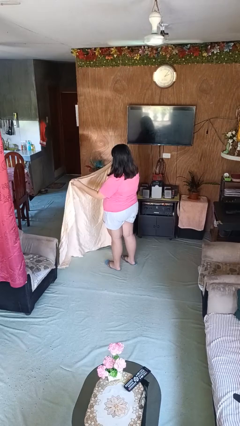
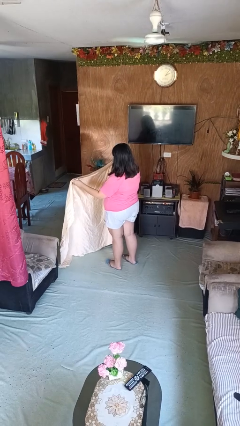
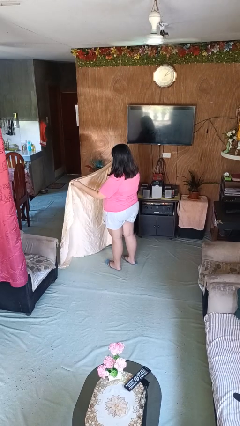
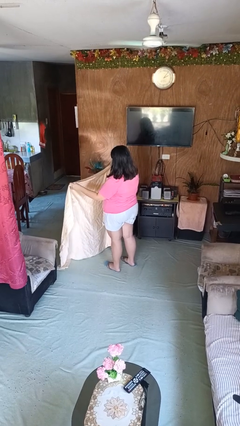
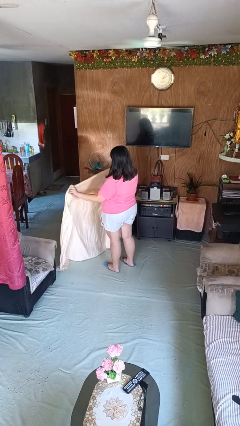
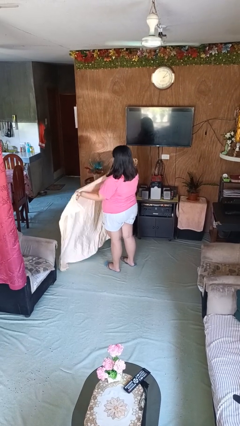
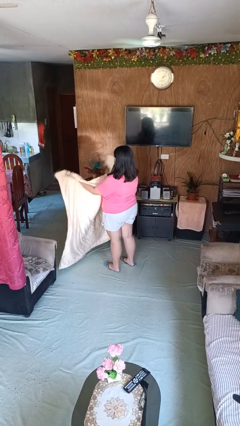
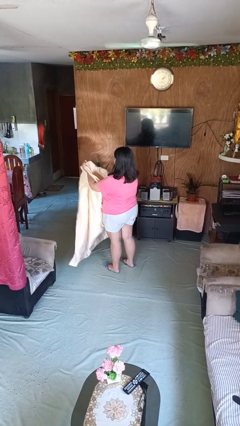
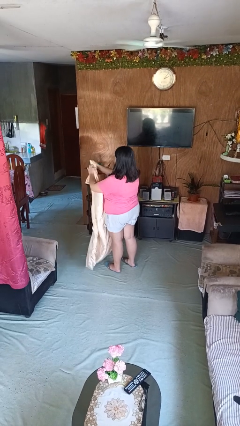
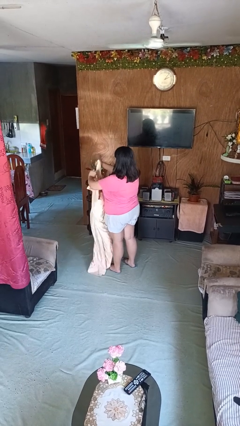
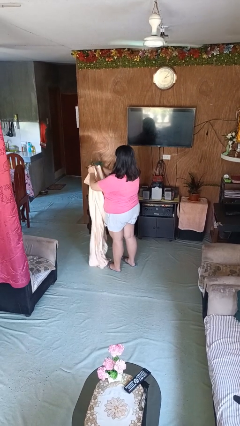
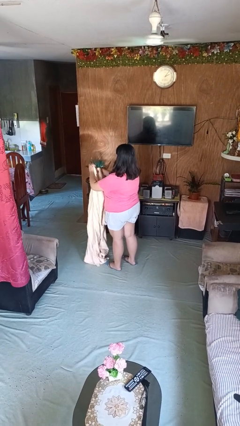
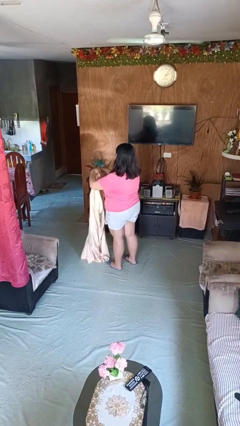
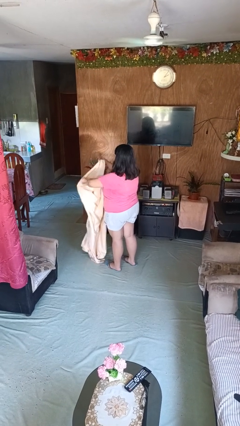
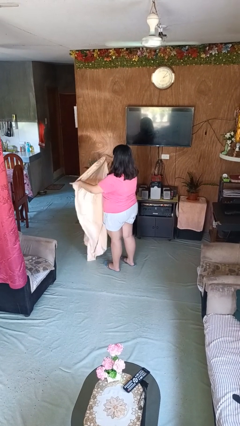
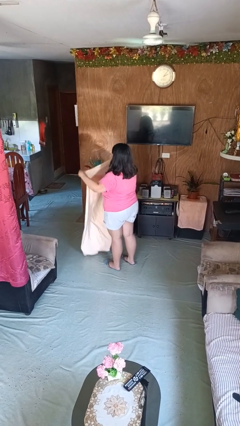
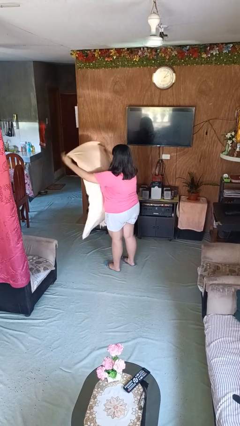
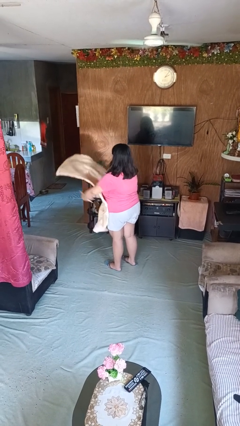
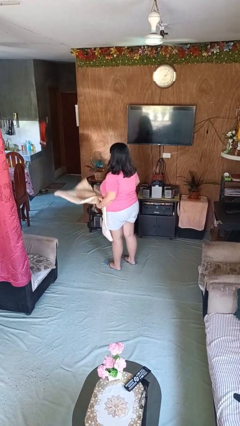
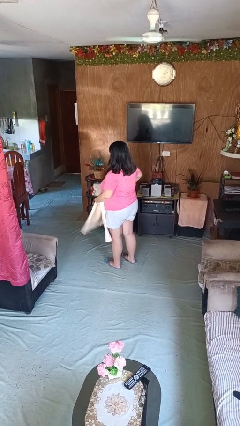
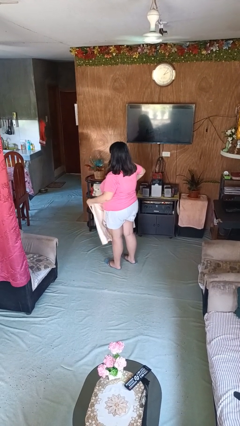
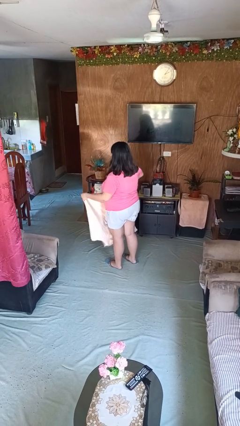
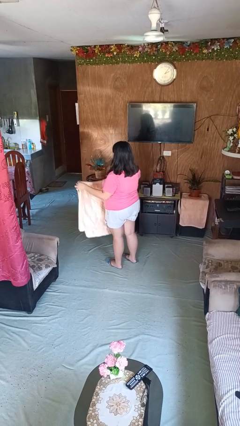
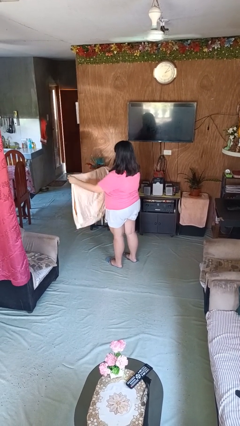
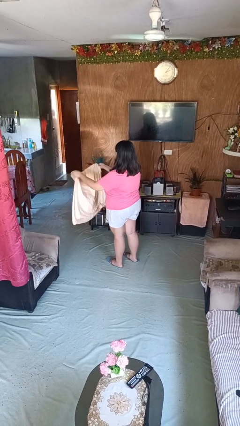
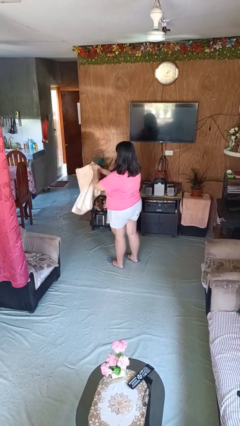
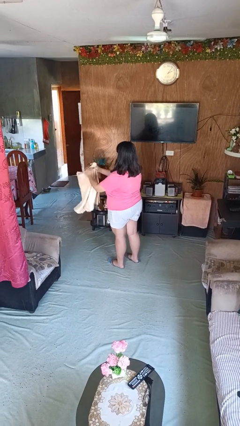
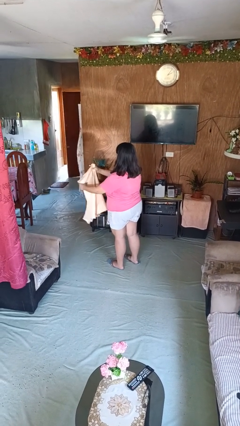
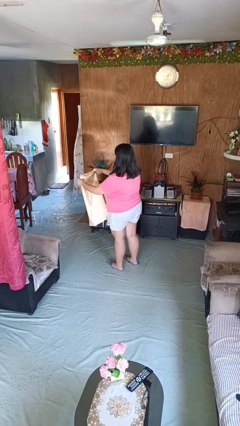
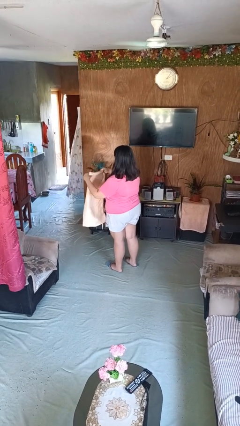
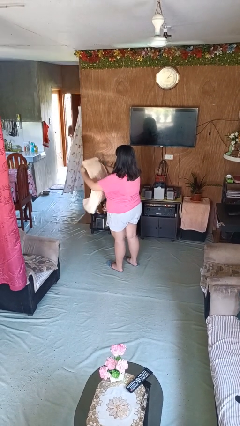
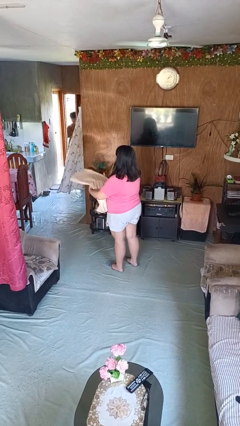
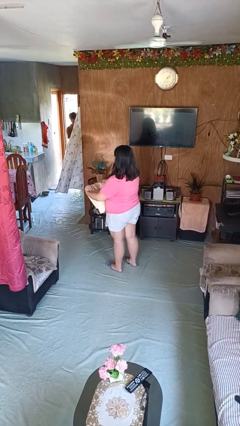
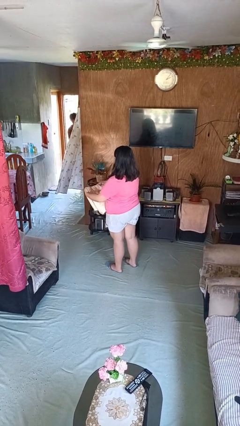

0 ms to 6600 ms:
person folds blanket

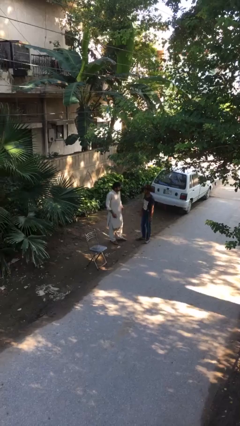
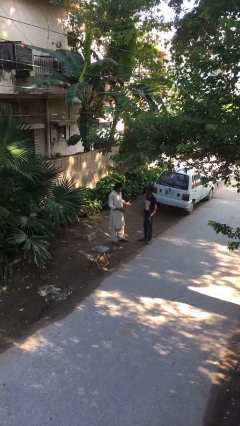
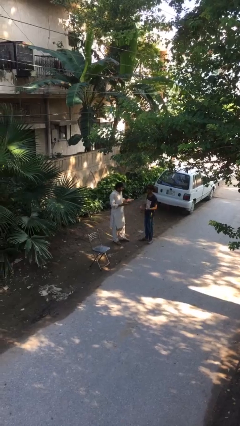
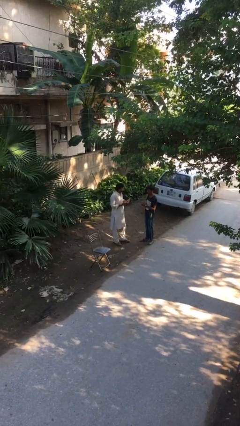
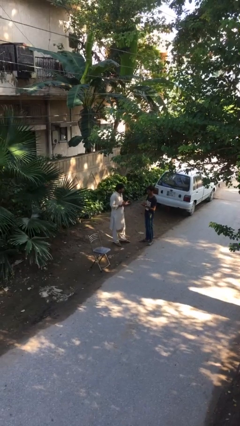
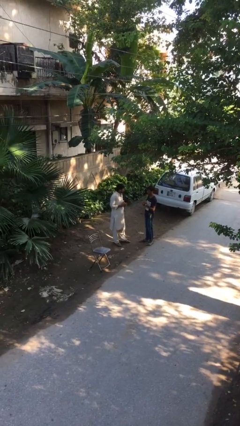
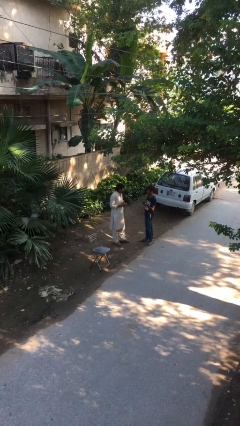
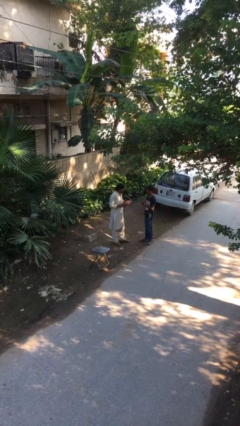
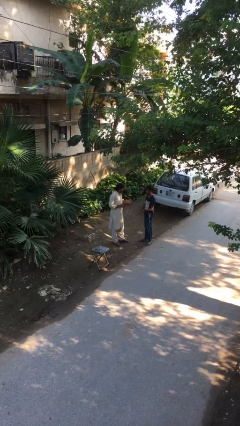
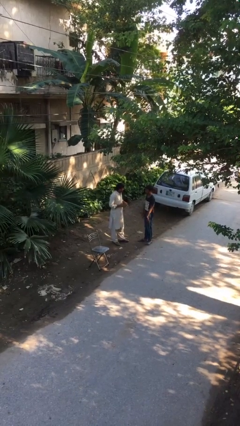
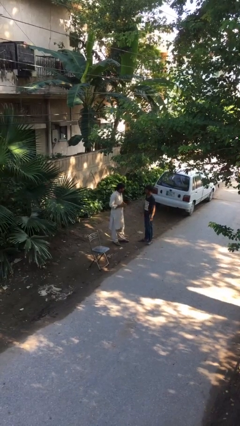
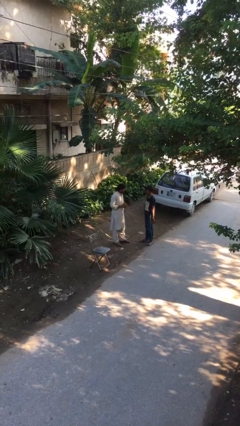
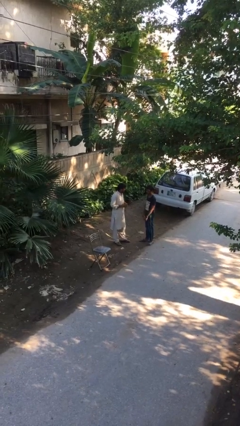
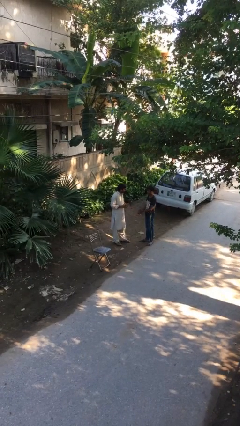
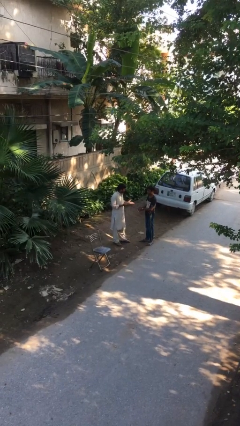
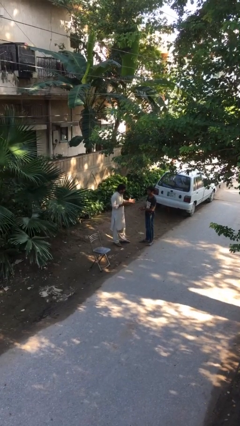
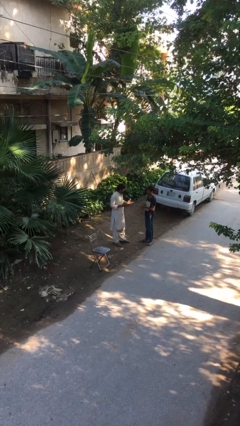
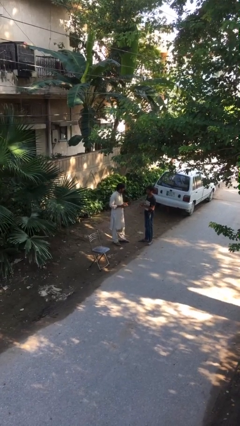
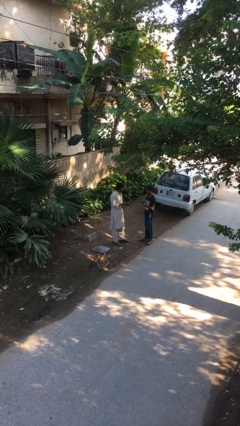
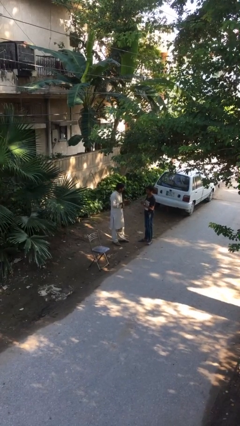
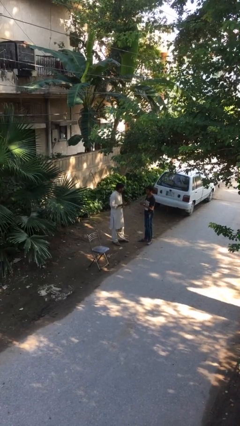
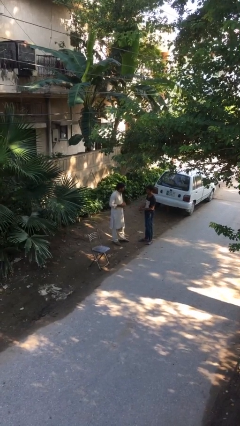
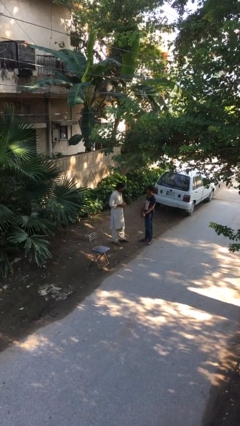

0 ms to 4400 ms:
person talks to person

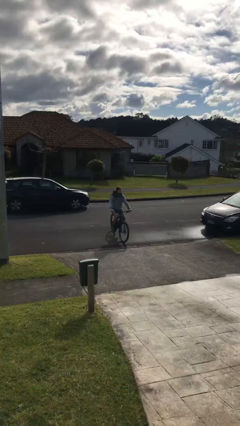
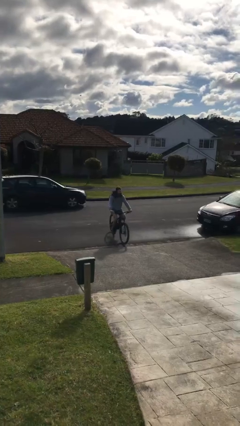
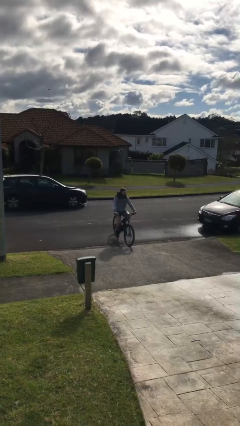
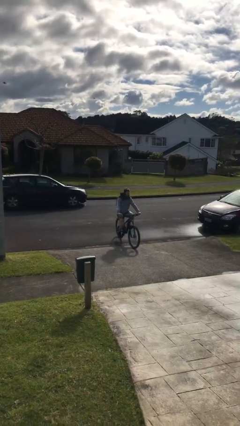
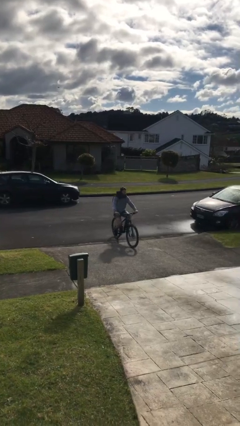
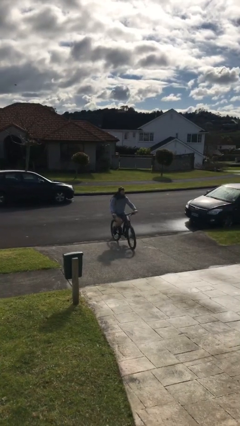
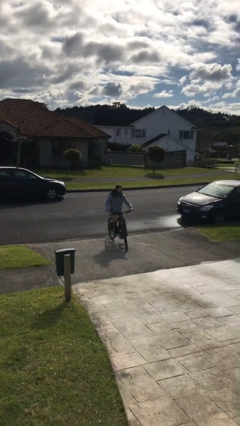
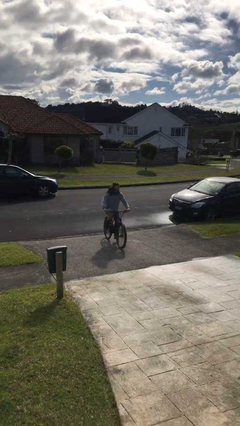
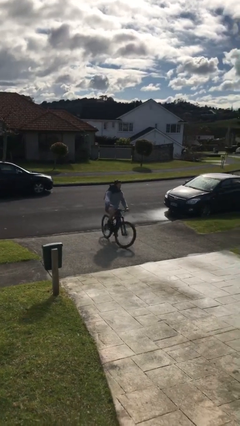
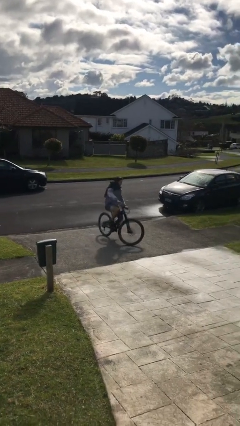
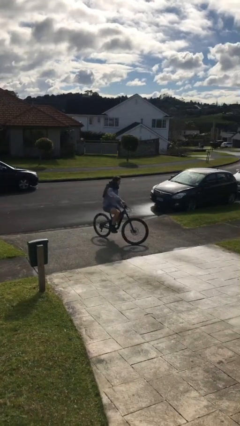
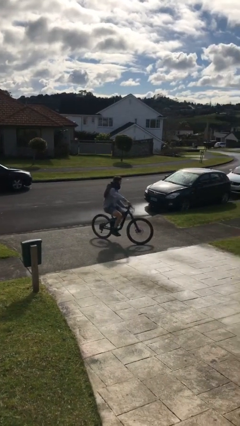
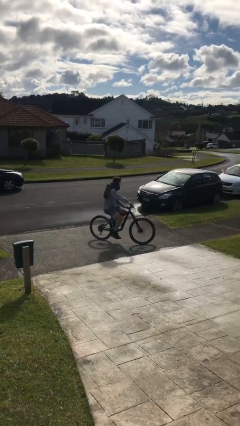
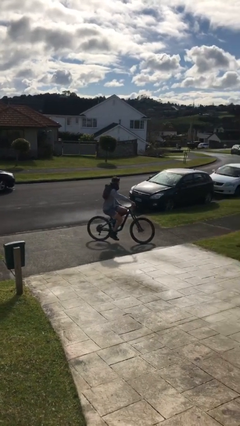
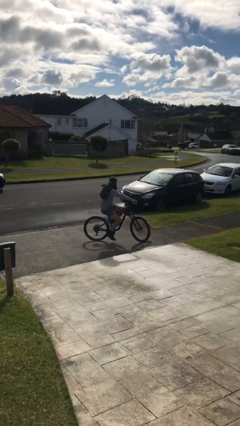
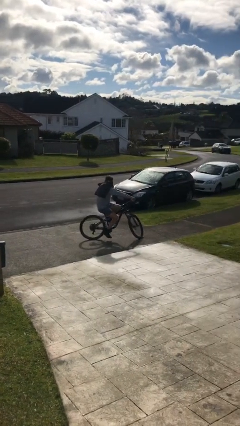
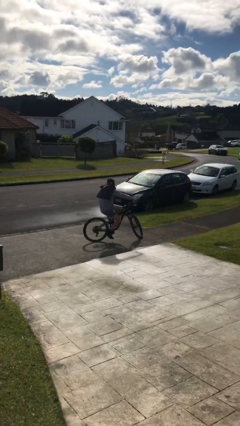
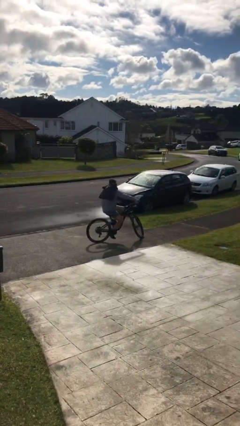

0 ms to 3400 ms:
person rides bicycle

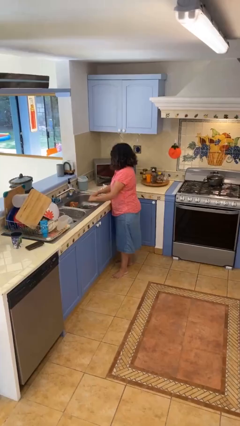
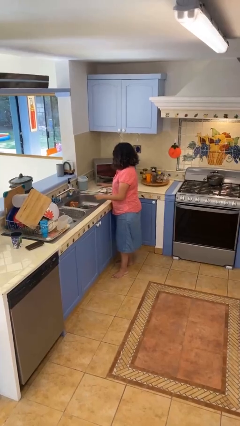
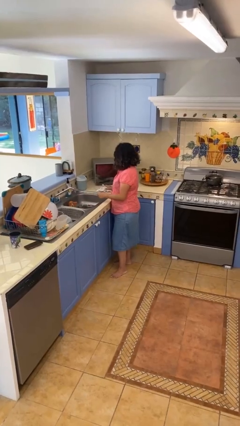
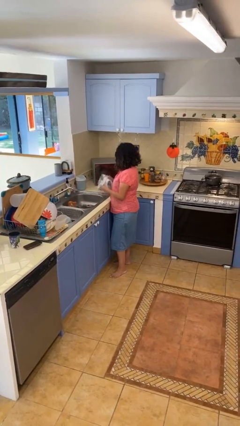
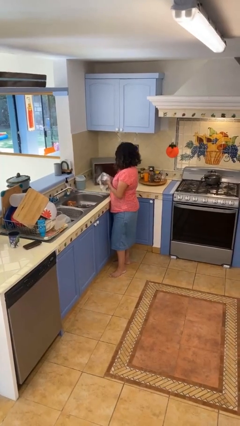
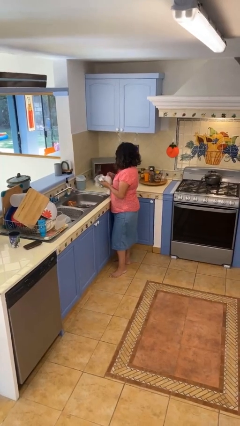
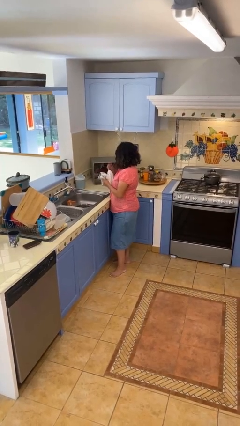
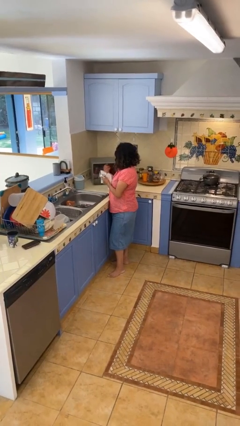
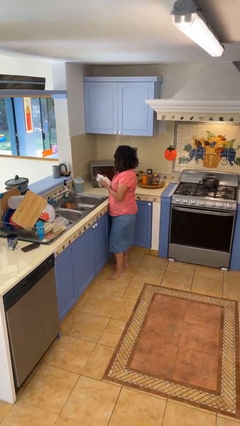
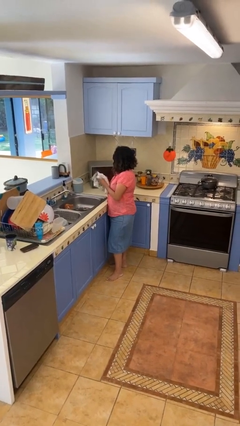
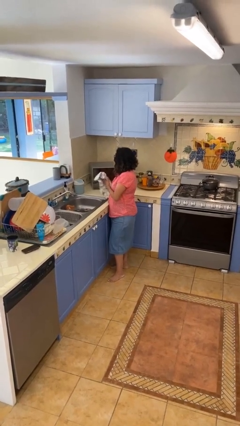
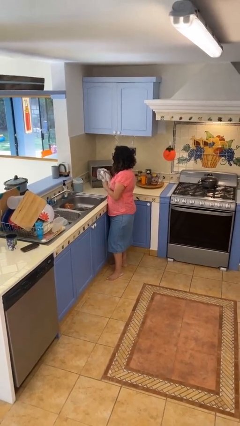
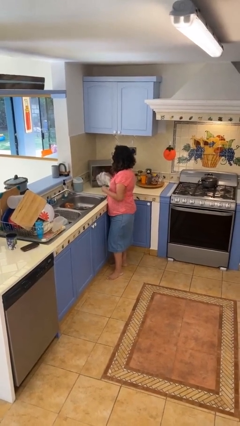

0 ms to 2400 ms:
person dries hands with towel

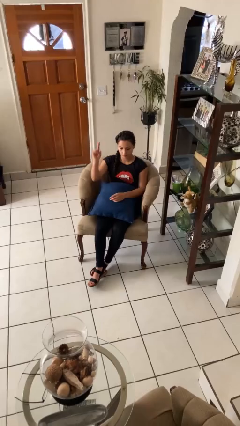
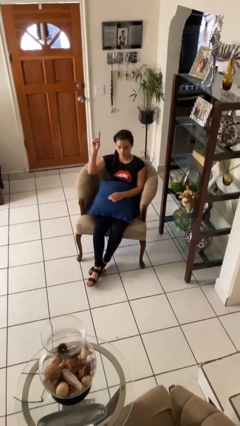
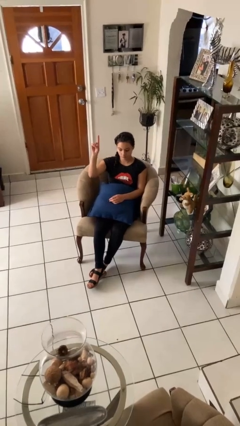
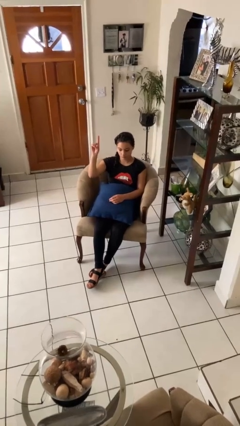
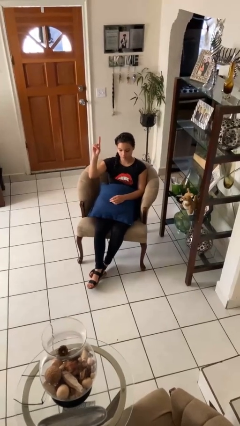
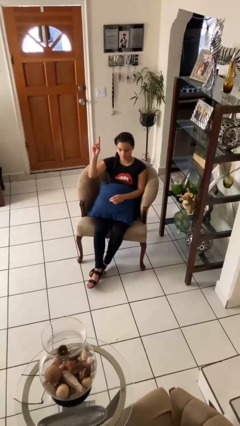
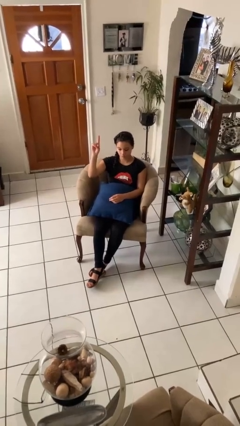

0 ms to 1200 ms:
person gestures number one
